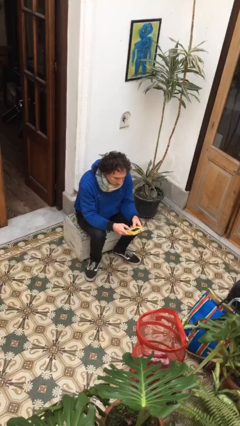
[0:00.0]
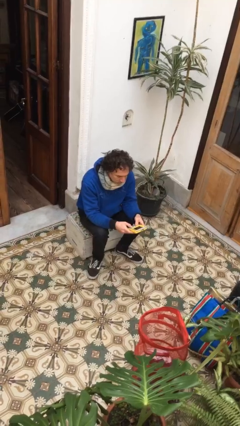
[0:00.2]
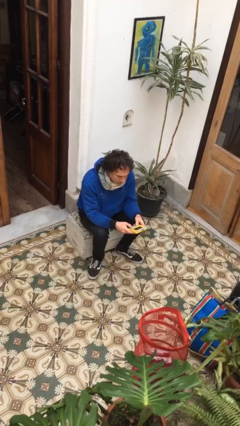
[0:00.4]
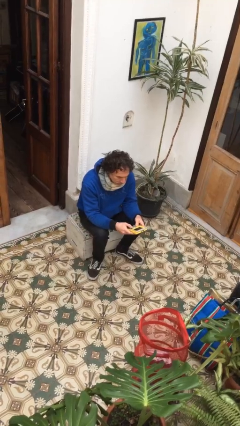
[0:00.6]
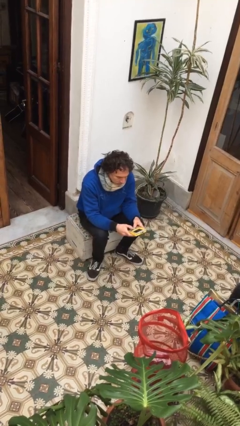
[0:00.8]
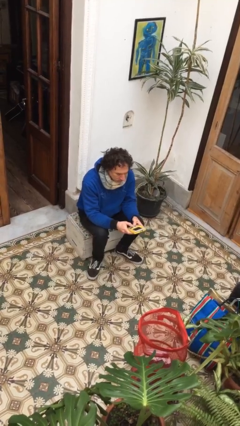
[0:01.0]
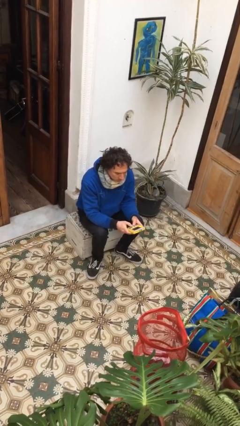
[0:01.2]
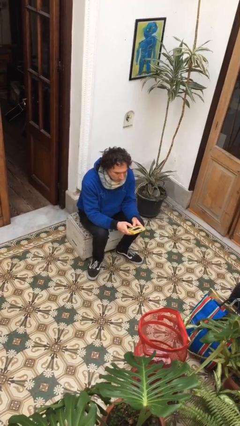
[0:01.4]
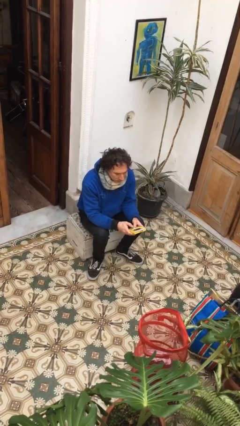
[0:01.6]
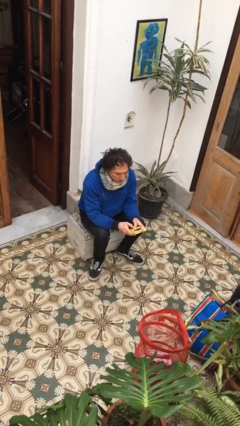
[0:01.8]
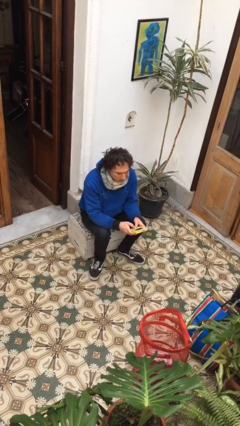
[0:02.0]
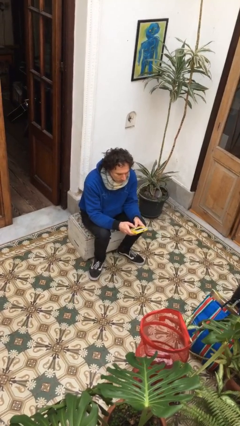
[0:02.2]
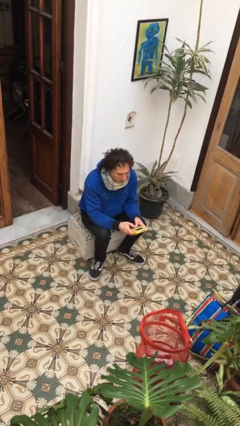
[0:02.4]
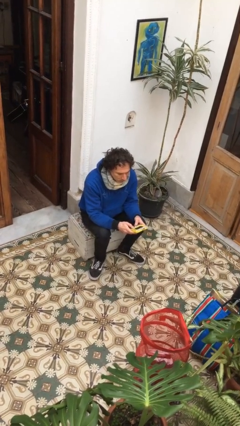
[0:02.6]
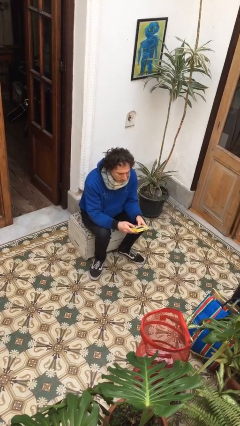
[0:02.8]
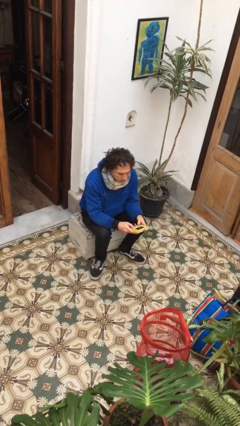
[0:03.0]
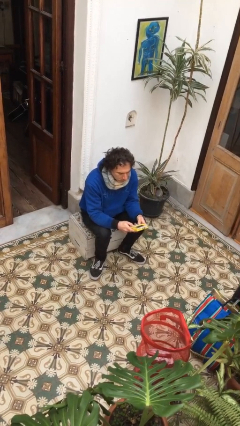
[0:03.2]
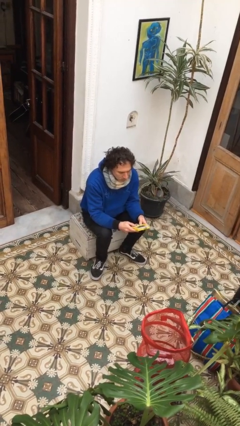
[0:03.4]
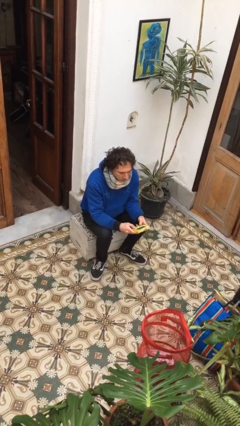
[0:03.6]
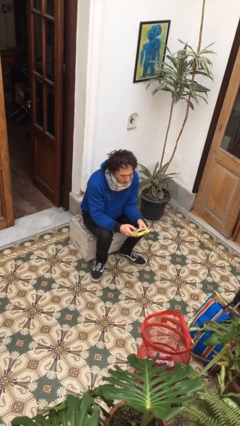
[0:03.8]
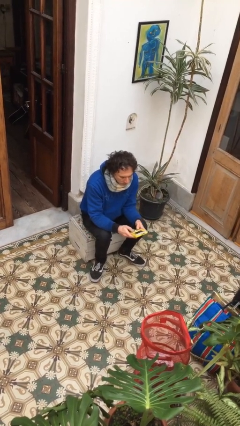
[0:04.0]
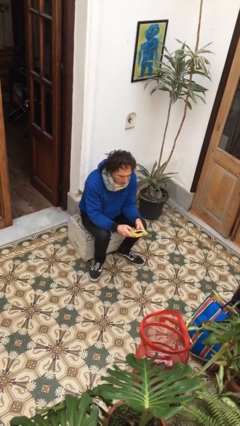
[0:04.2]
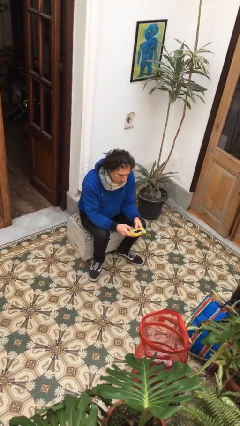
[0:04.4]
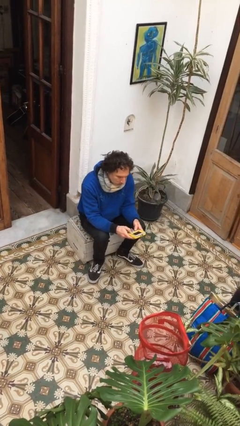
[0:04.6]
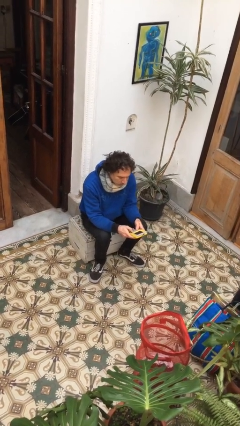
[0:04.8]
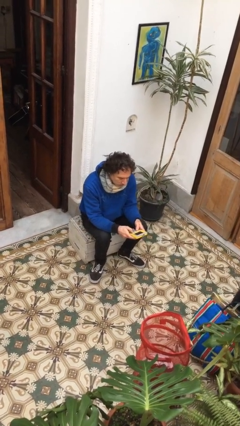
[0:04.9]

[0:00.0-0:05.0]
person interacts with handheld game

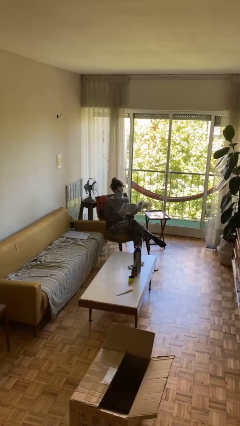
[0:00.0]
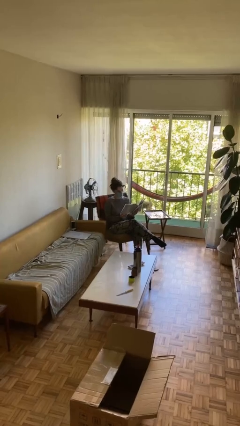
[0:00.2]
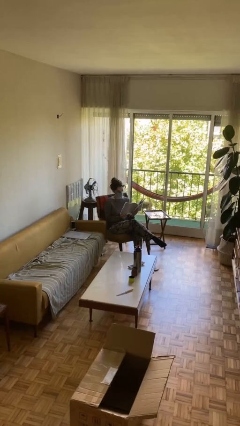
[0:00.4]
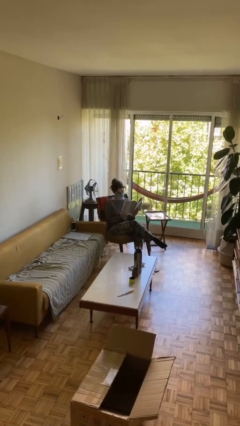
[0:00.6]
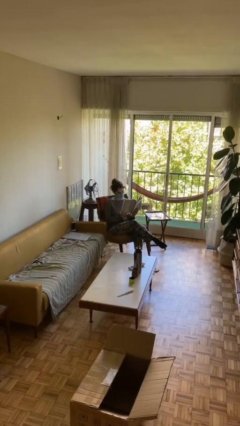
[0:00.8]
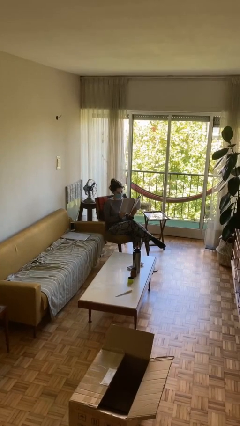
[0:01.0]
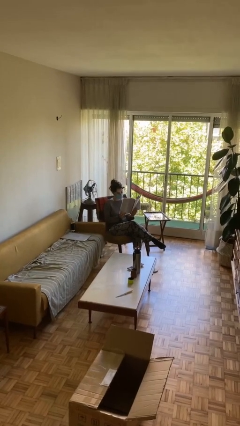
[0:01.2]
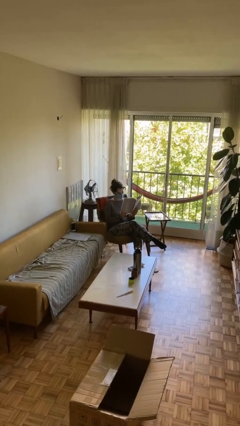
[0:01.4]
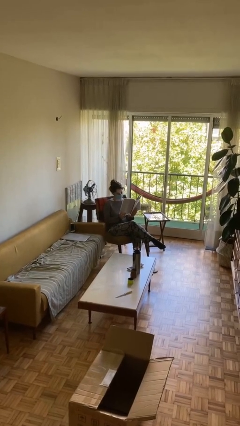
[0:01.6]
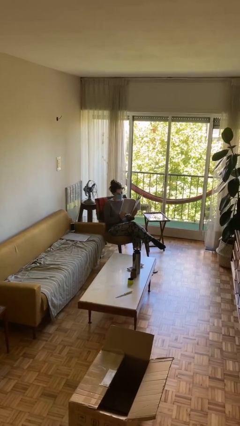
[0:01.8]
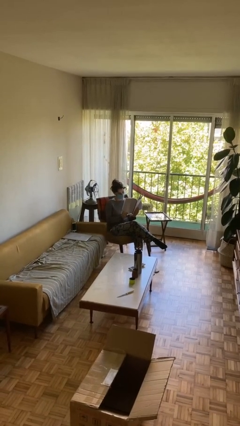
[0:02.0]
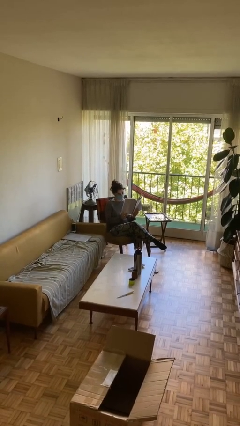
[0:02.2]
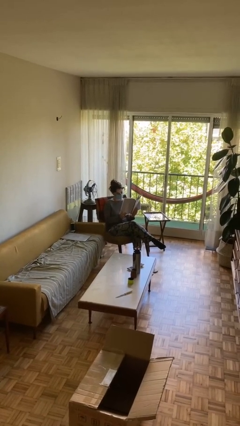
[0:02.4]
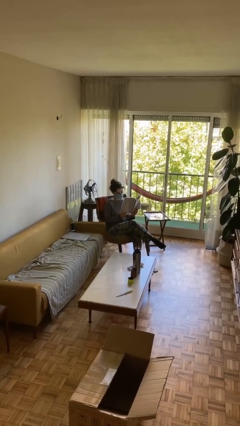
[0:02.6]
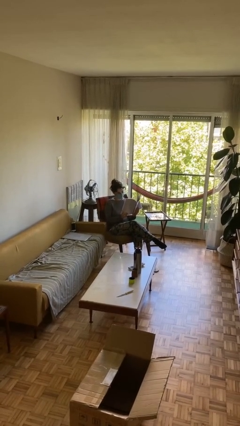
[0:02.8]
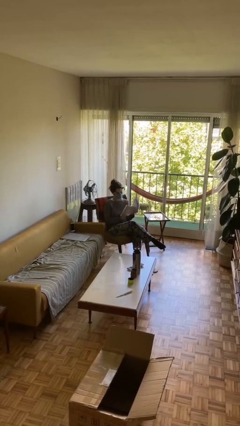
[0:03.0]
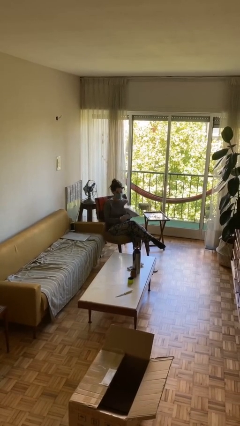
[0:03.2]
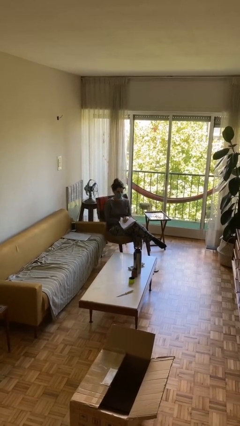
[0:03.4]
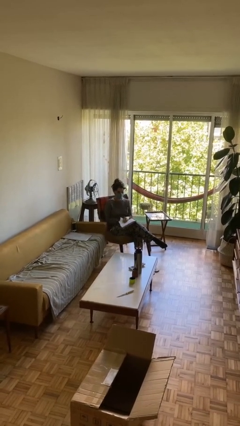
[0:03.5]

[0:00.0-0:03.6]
person reads document

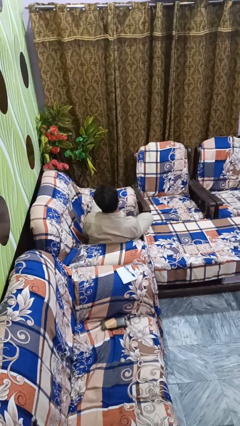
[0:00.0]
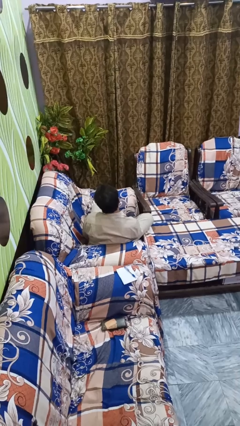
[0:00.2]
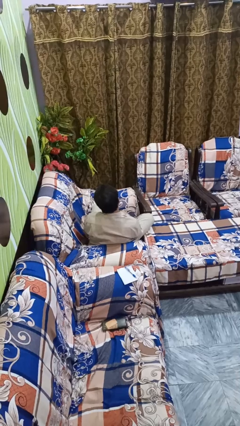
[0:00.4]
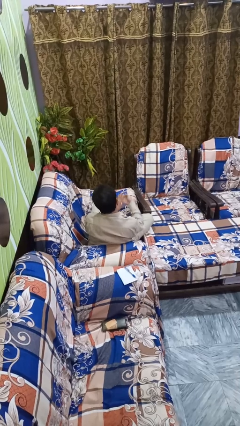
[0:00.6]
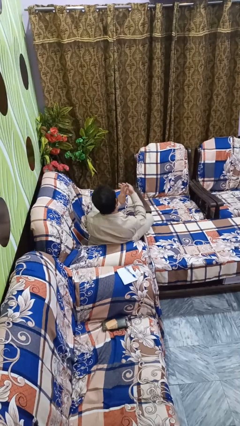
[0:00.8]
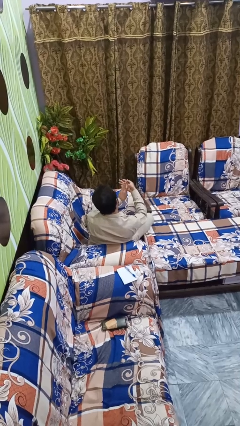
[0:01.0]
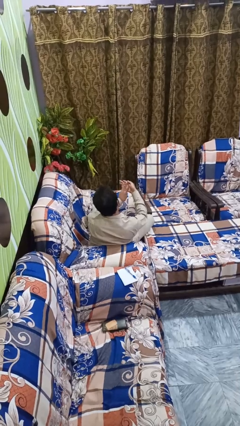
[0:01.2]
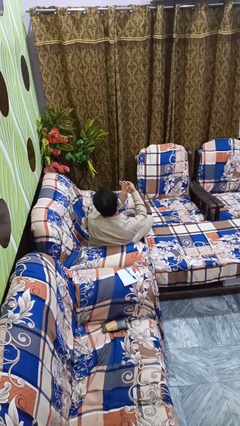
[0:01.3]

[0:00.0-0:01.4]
person gestures number three

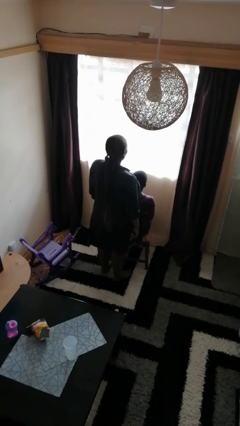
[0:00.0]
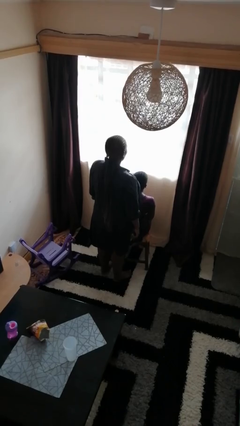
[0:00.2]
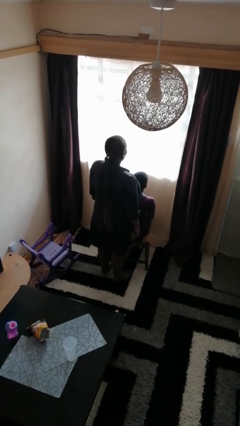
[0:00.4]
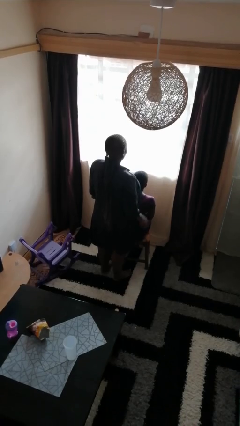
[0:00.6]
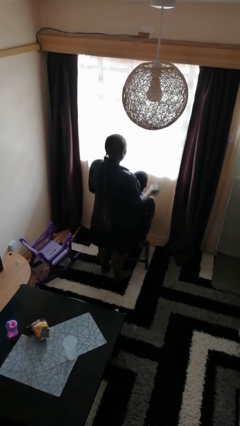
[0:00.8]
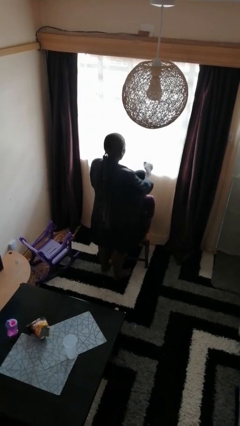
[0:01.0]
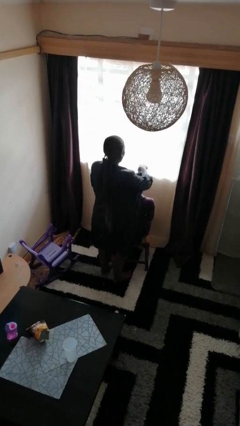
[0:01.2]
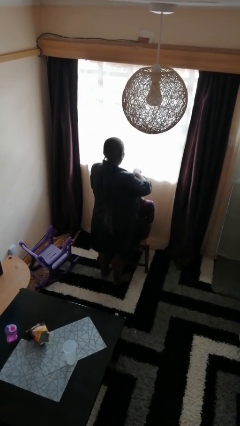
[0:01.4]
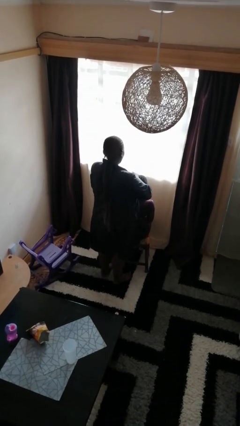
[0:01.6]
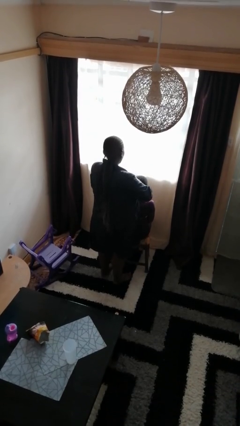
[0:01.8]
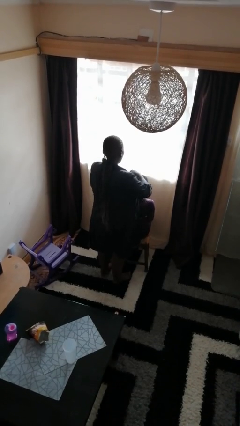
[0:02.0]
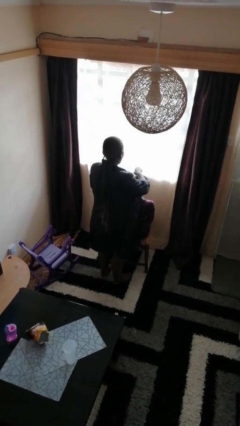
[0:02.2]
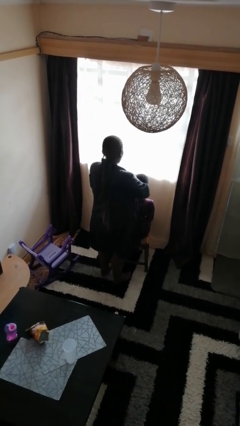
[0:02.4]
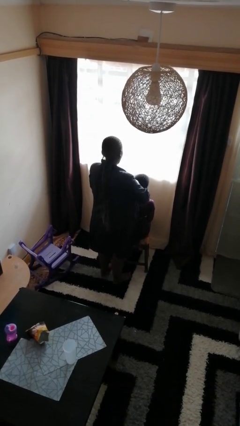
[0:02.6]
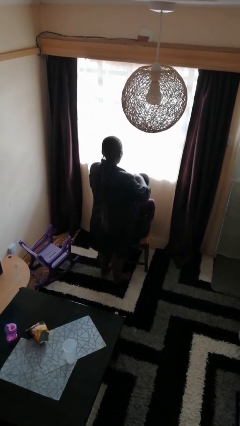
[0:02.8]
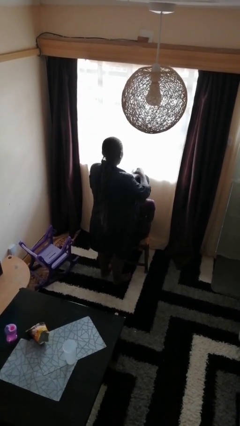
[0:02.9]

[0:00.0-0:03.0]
person brushes hair of person

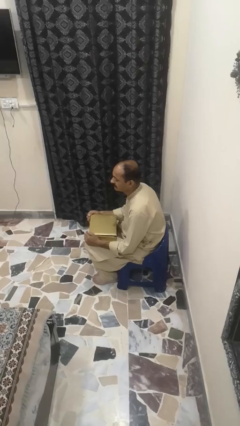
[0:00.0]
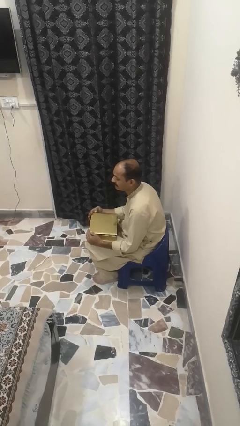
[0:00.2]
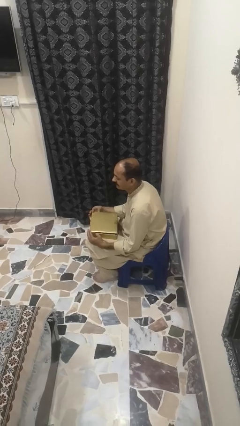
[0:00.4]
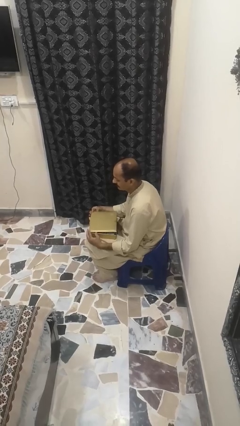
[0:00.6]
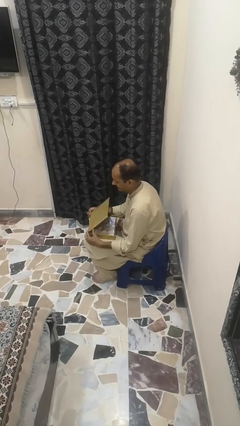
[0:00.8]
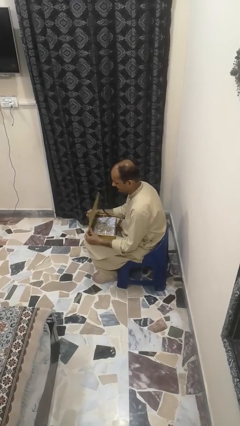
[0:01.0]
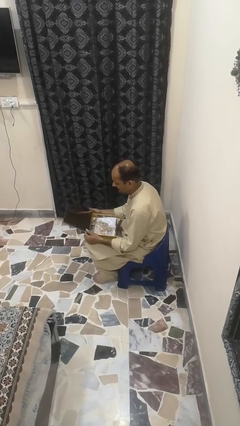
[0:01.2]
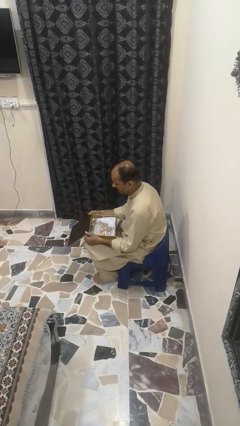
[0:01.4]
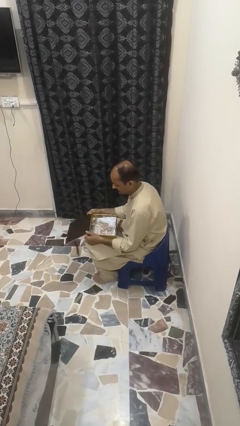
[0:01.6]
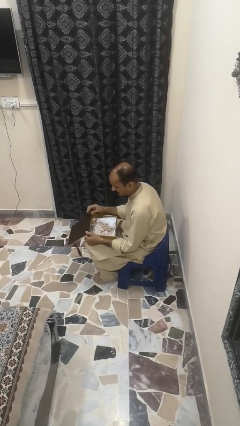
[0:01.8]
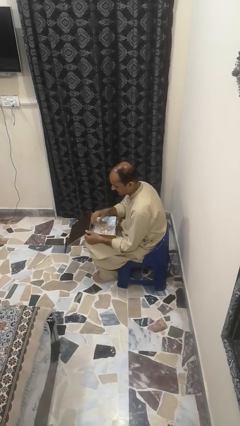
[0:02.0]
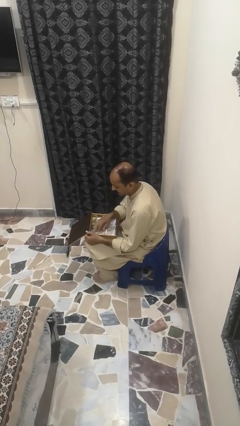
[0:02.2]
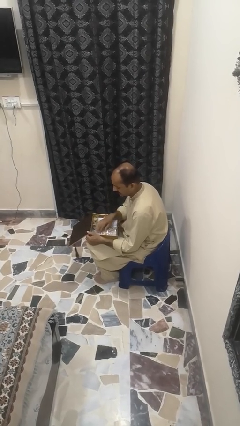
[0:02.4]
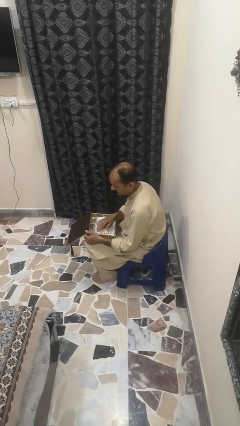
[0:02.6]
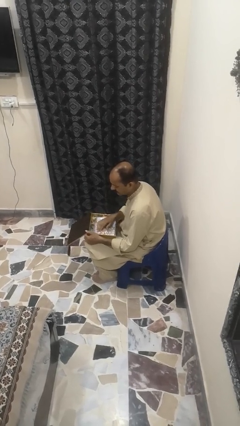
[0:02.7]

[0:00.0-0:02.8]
person opens jewelry box

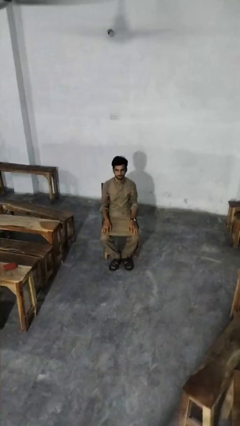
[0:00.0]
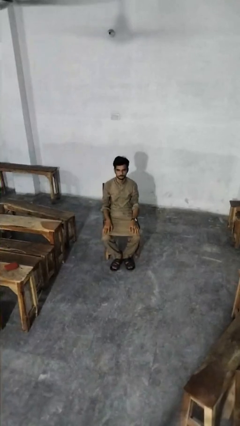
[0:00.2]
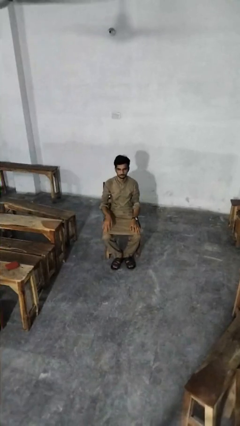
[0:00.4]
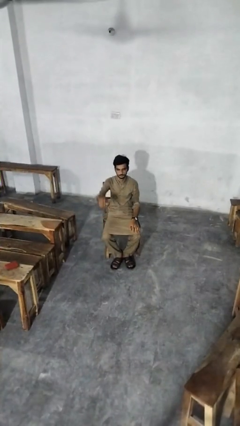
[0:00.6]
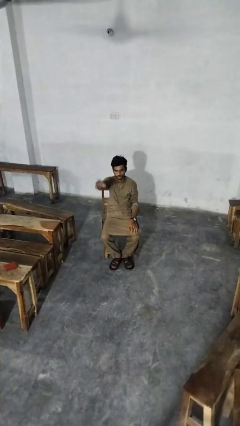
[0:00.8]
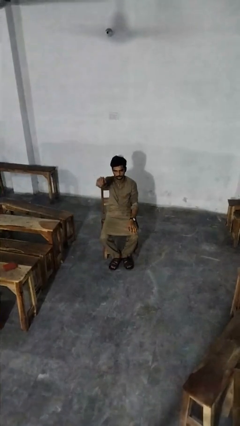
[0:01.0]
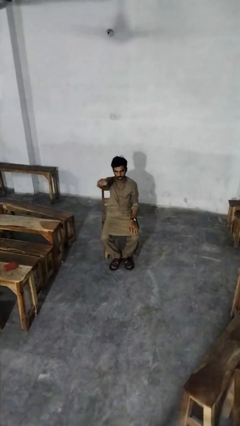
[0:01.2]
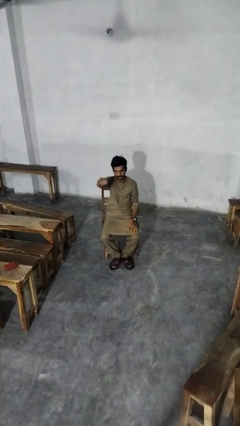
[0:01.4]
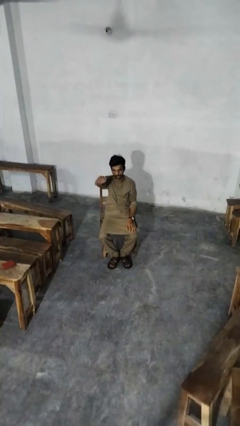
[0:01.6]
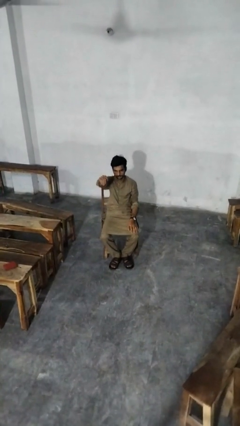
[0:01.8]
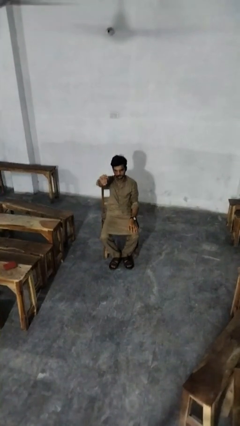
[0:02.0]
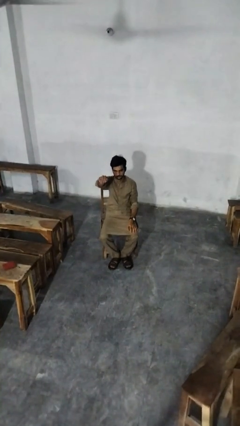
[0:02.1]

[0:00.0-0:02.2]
person gestures come here
